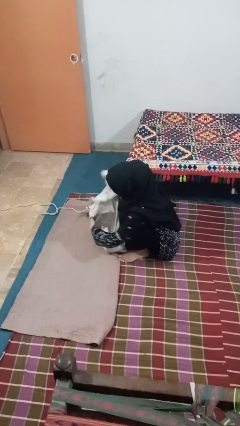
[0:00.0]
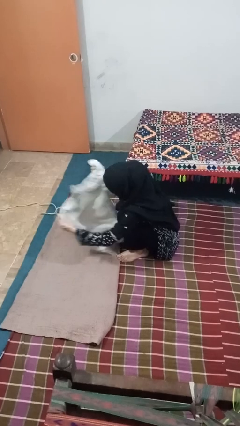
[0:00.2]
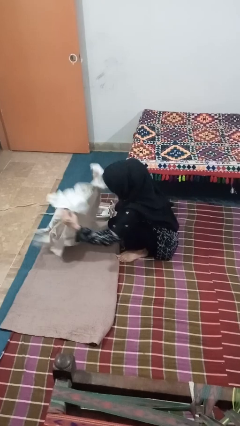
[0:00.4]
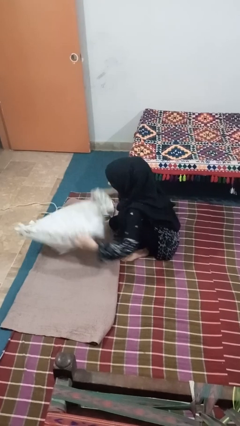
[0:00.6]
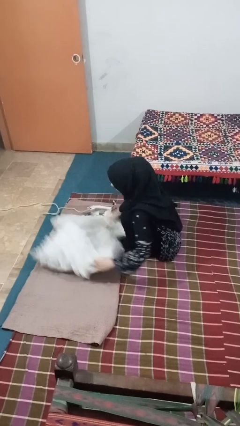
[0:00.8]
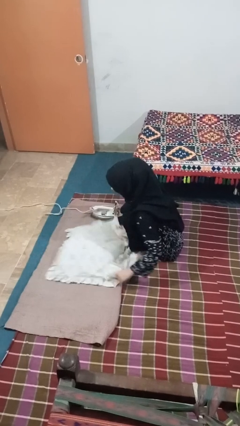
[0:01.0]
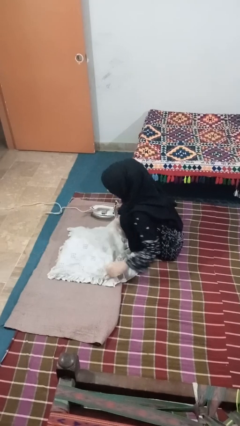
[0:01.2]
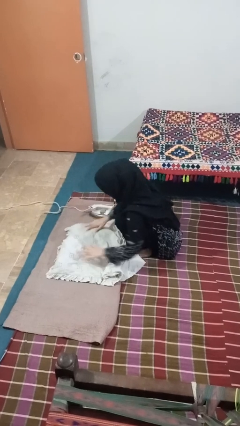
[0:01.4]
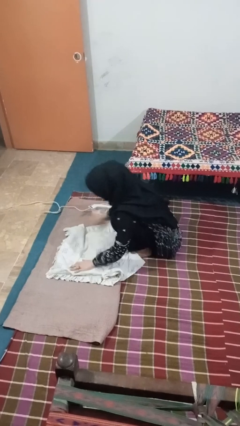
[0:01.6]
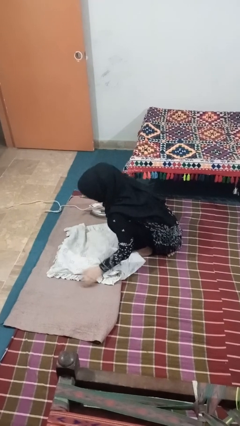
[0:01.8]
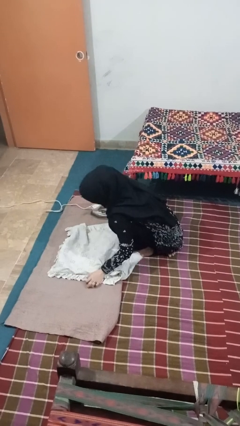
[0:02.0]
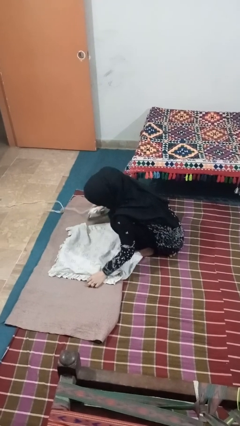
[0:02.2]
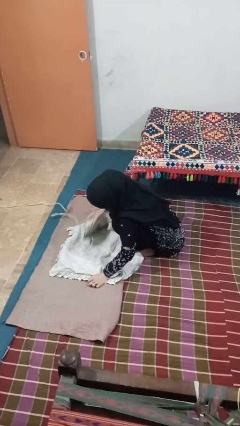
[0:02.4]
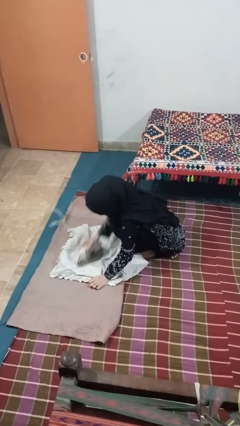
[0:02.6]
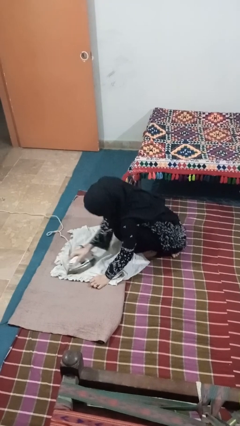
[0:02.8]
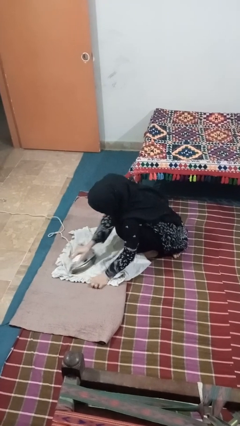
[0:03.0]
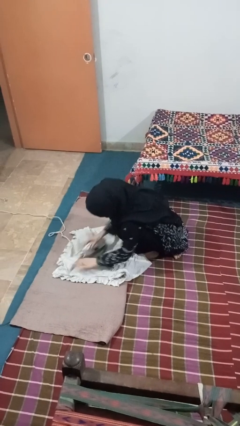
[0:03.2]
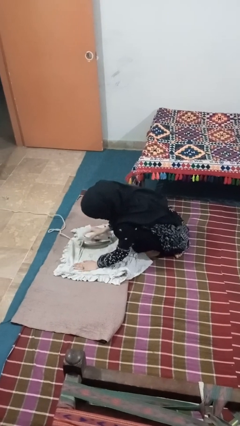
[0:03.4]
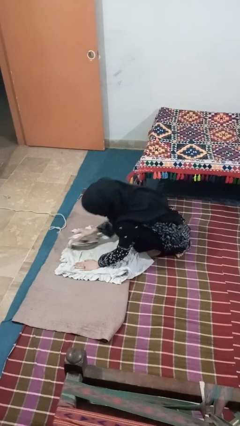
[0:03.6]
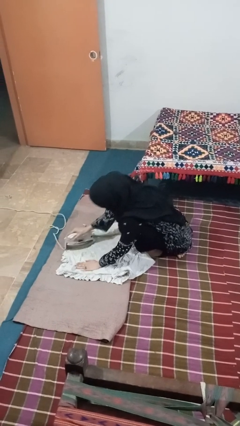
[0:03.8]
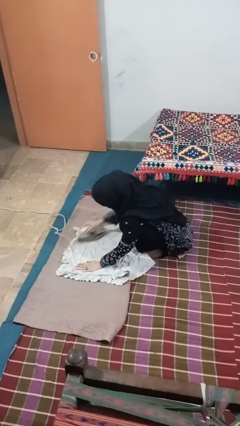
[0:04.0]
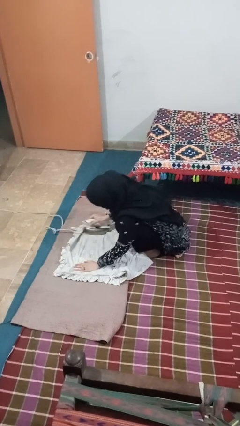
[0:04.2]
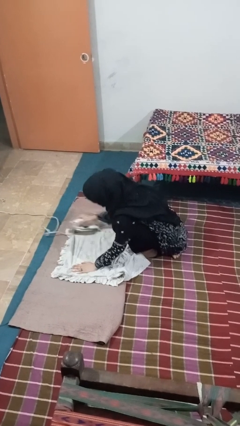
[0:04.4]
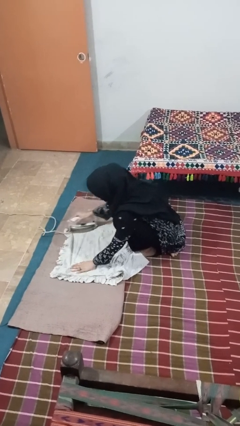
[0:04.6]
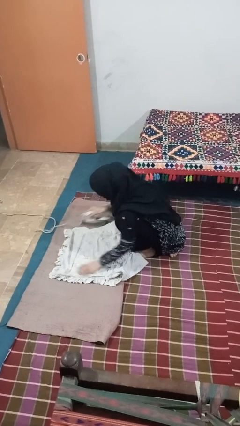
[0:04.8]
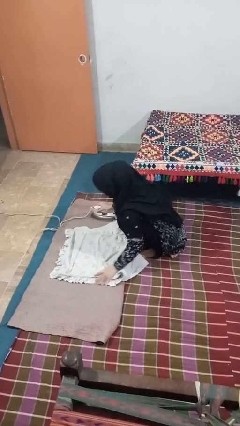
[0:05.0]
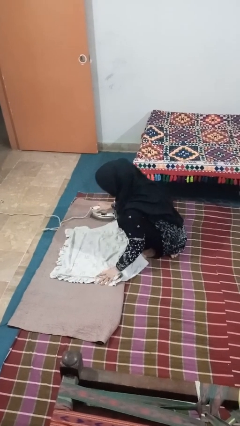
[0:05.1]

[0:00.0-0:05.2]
person irons clothes

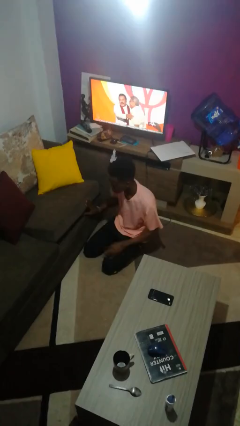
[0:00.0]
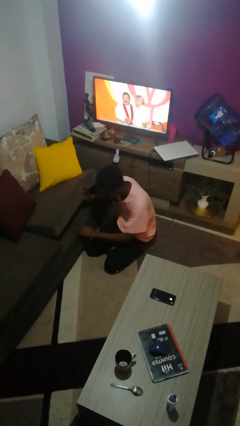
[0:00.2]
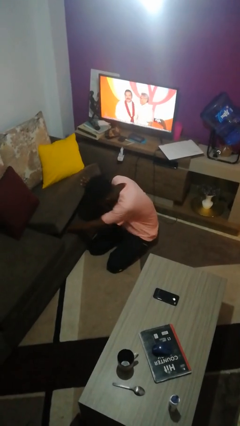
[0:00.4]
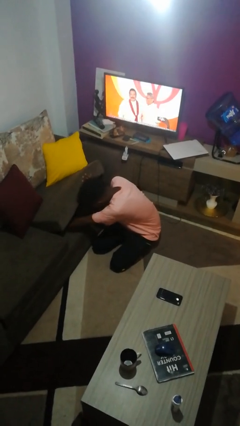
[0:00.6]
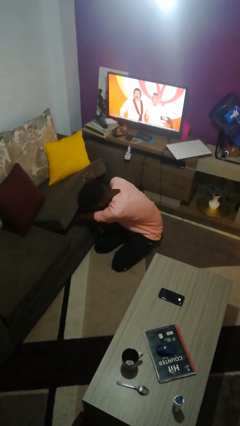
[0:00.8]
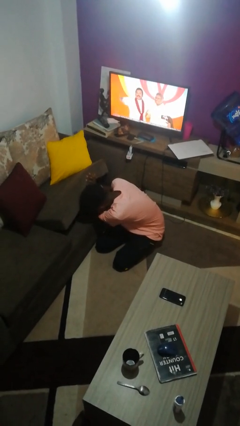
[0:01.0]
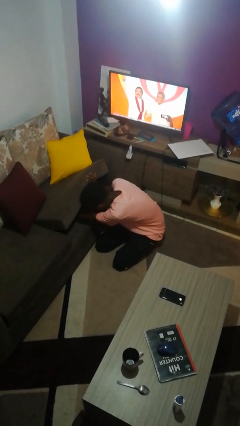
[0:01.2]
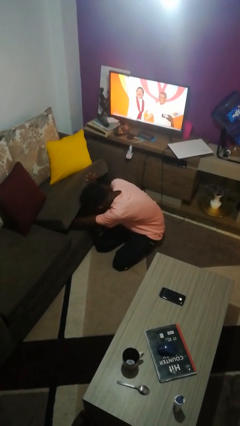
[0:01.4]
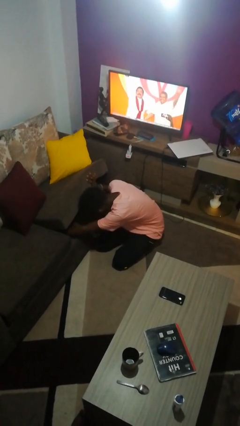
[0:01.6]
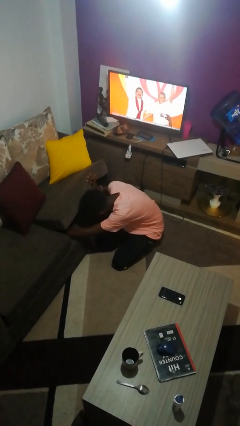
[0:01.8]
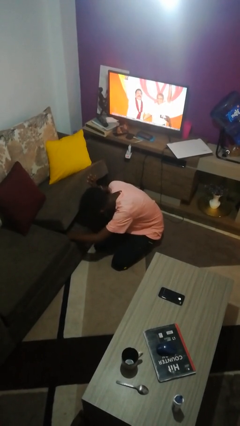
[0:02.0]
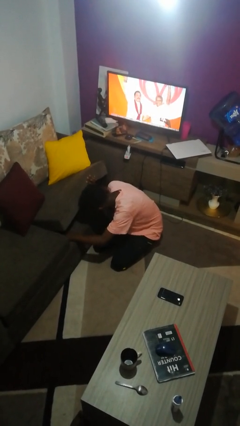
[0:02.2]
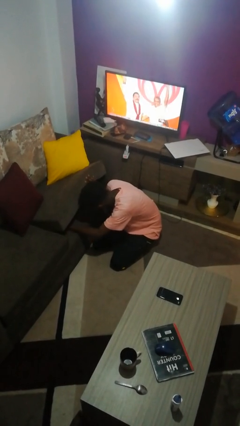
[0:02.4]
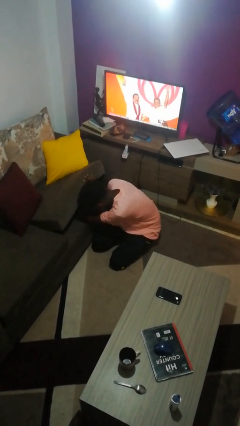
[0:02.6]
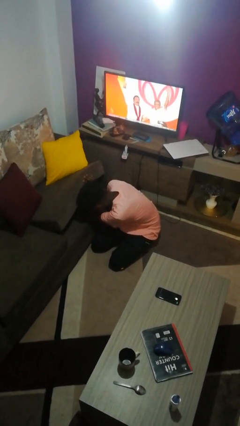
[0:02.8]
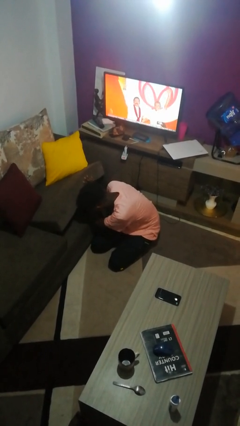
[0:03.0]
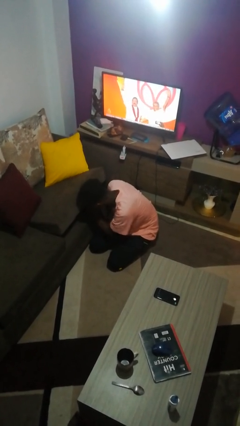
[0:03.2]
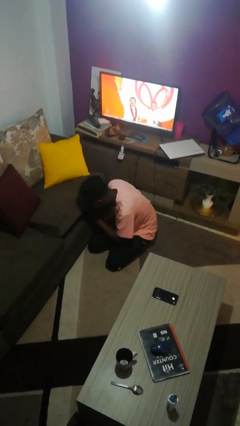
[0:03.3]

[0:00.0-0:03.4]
person searches under couch

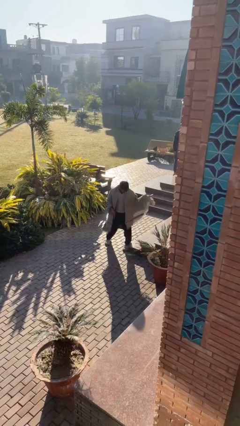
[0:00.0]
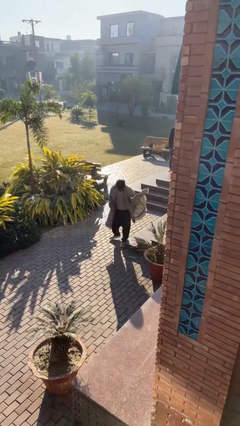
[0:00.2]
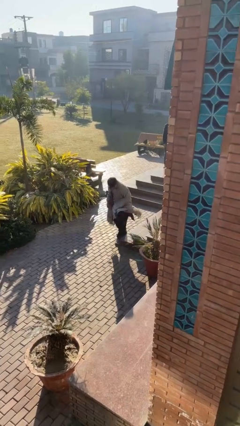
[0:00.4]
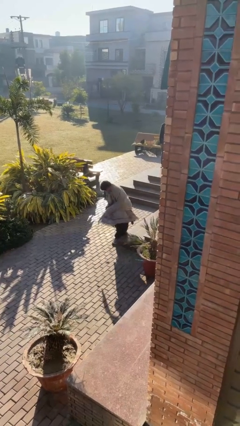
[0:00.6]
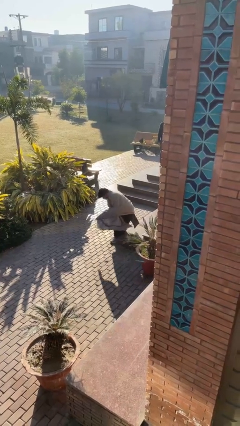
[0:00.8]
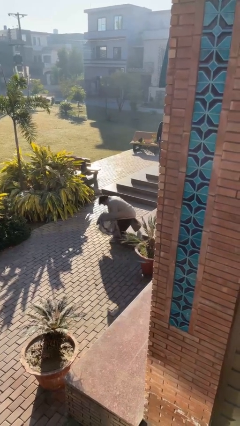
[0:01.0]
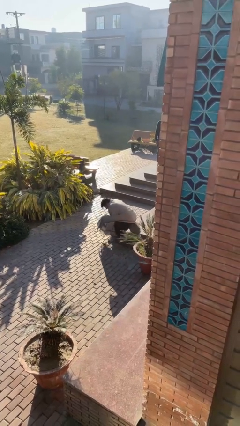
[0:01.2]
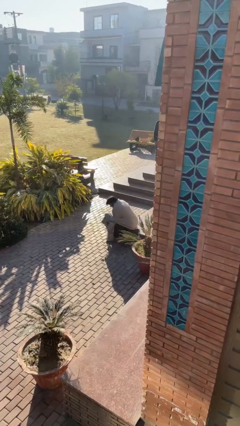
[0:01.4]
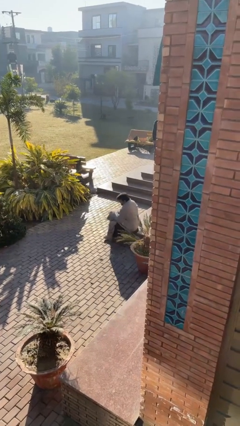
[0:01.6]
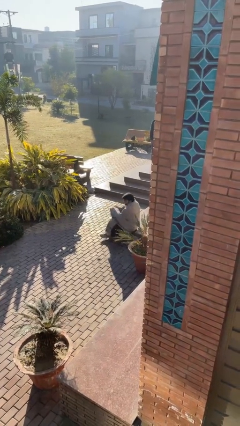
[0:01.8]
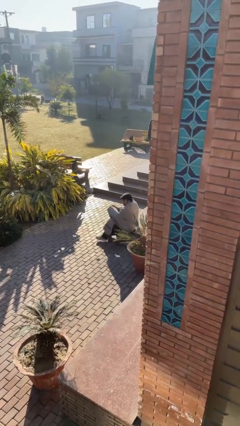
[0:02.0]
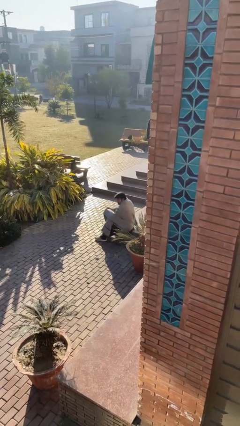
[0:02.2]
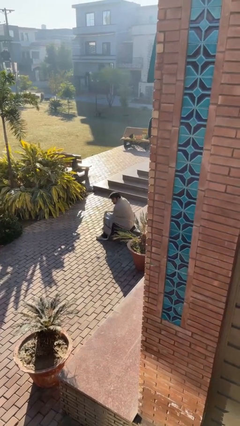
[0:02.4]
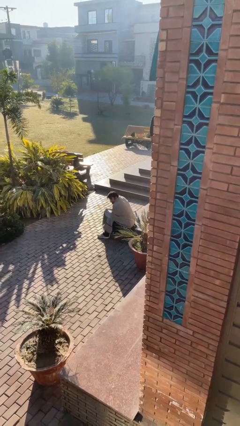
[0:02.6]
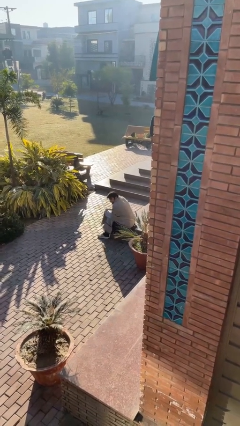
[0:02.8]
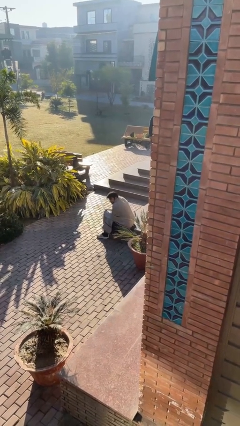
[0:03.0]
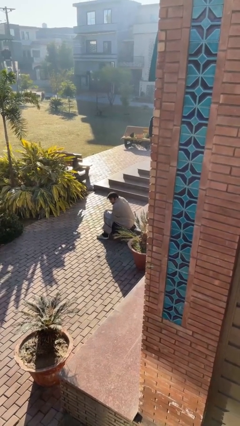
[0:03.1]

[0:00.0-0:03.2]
person sits down

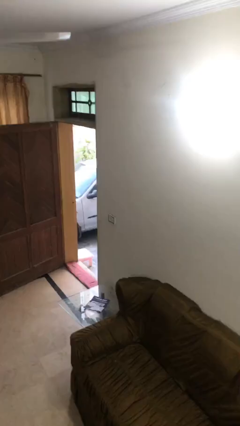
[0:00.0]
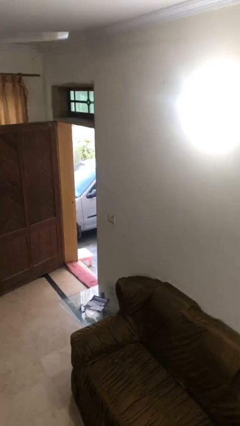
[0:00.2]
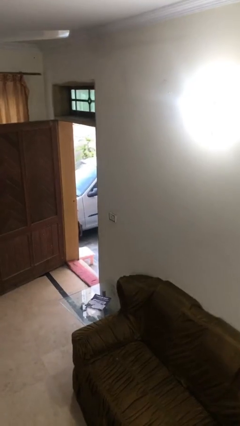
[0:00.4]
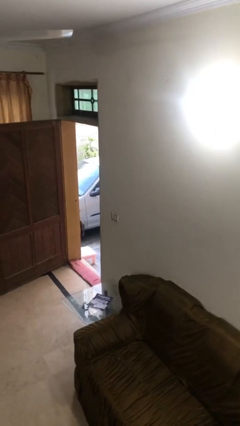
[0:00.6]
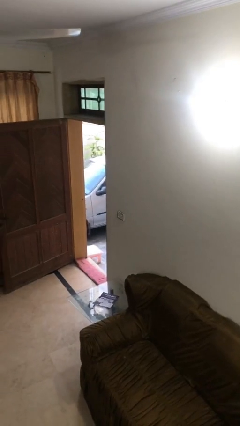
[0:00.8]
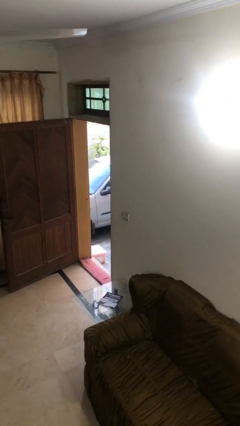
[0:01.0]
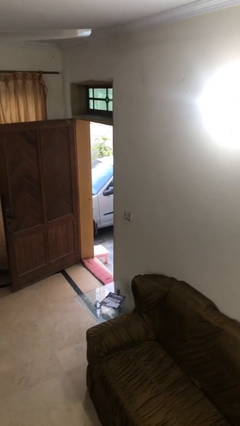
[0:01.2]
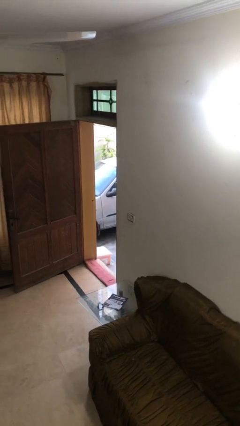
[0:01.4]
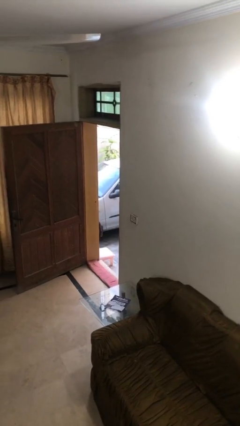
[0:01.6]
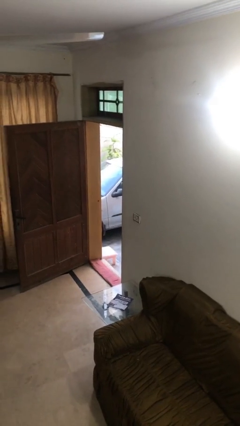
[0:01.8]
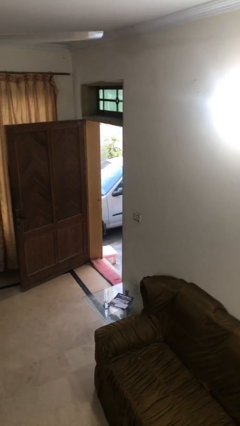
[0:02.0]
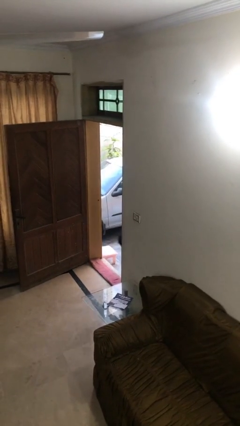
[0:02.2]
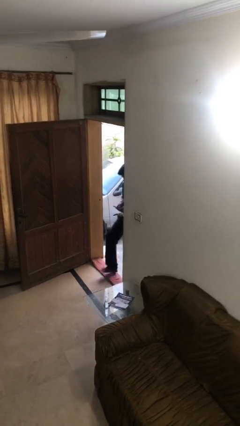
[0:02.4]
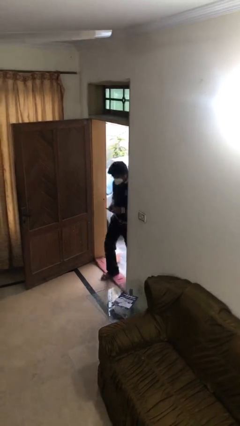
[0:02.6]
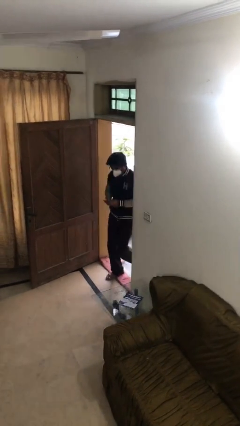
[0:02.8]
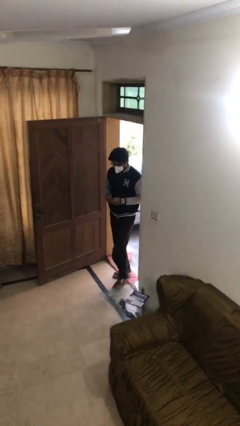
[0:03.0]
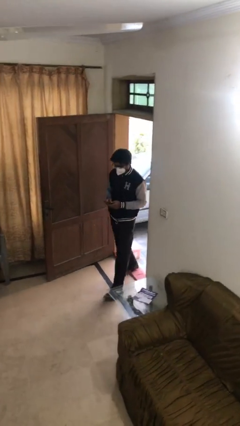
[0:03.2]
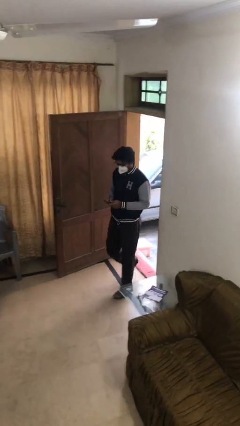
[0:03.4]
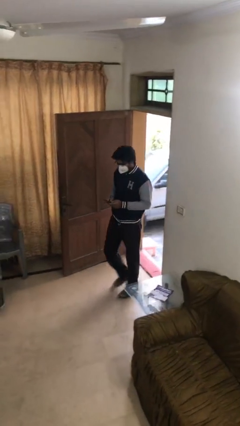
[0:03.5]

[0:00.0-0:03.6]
person enters scene through structure

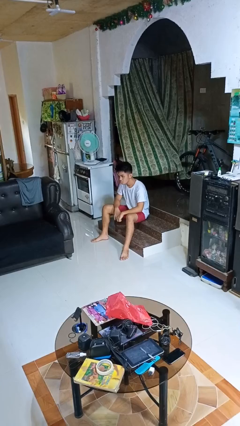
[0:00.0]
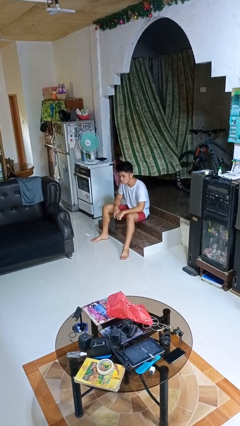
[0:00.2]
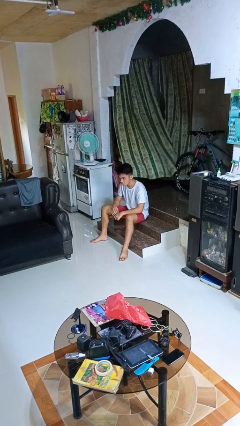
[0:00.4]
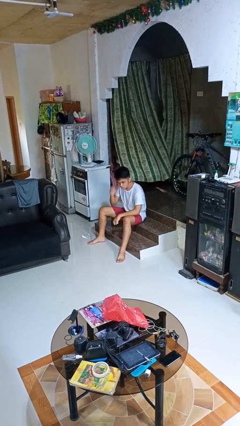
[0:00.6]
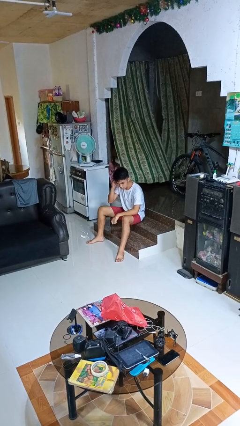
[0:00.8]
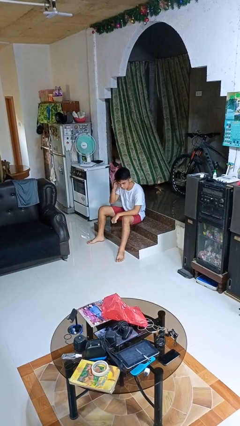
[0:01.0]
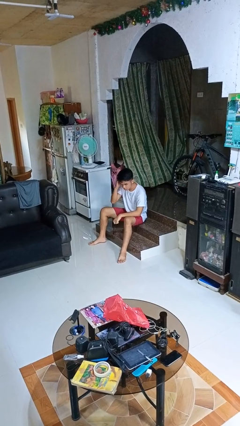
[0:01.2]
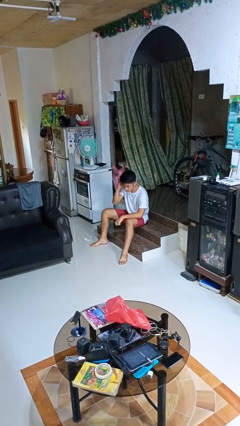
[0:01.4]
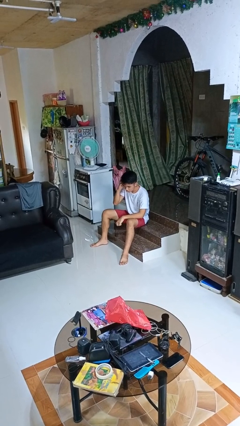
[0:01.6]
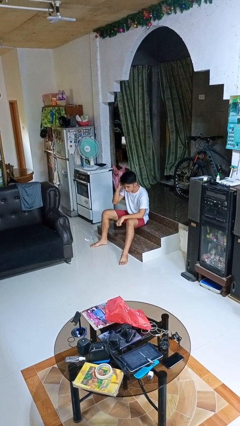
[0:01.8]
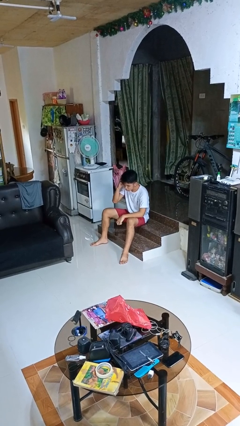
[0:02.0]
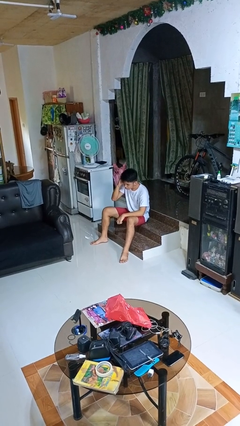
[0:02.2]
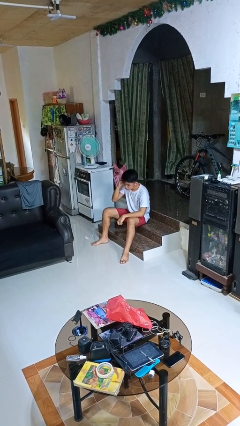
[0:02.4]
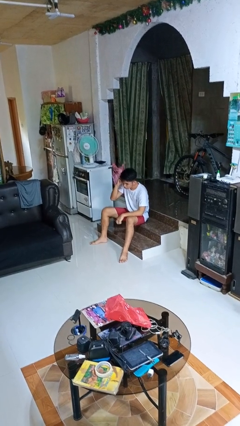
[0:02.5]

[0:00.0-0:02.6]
person scratches face
